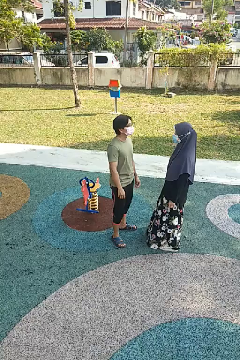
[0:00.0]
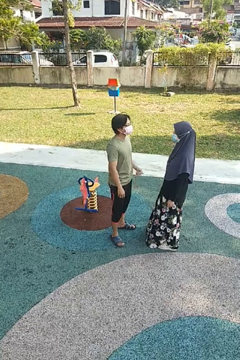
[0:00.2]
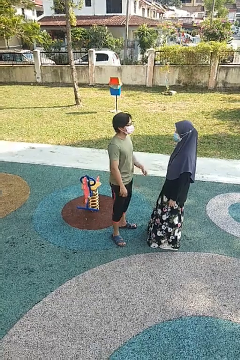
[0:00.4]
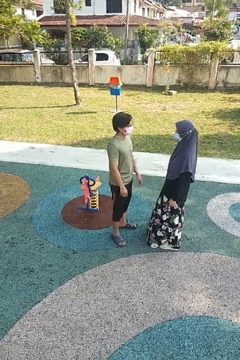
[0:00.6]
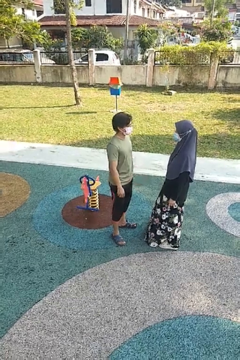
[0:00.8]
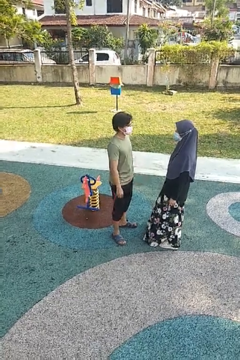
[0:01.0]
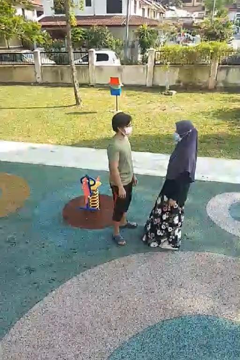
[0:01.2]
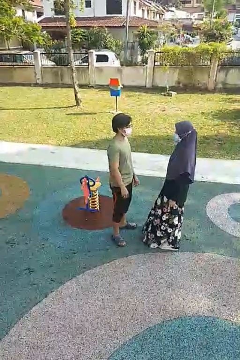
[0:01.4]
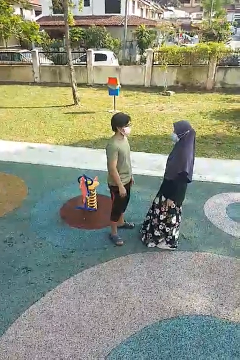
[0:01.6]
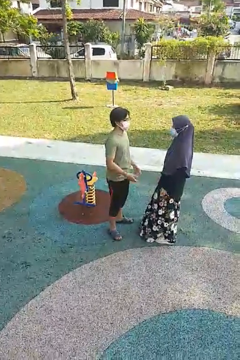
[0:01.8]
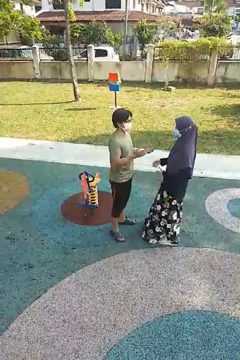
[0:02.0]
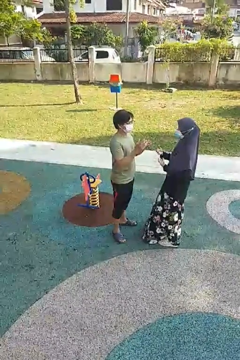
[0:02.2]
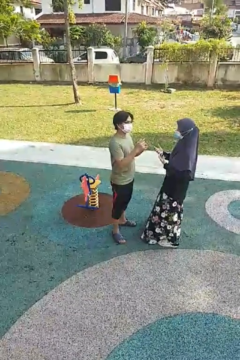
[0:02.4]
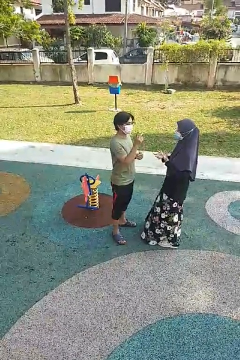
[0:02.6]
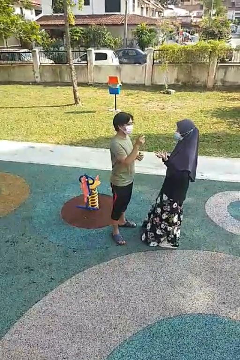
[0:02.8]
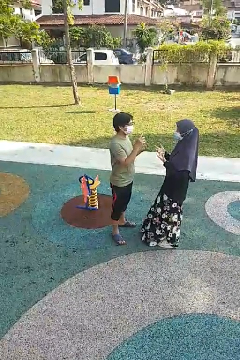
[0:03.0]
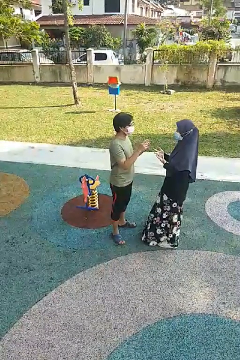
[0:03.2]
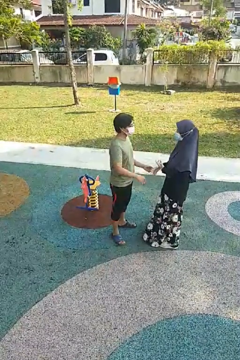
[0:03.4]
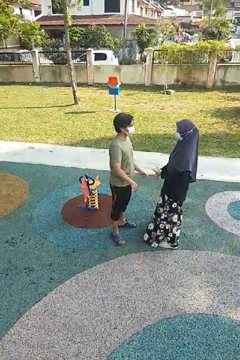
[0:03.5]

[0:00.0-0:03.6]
person talks to person

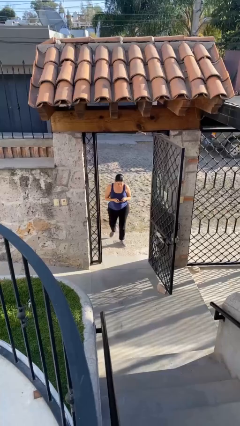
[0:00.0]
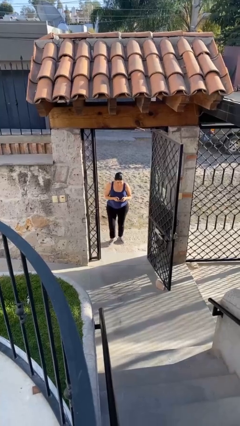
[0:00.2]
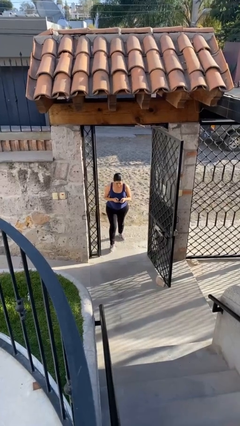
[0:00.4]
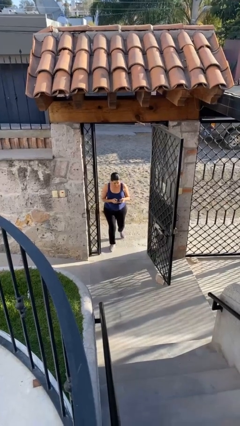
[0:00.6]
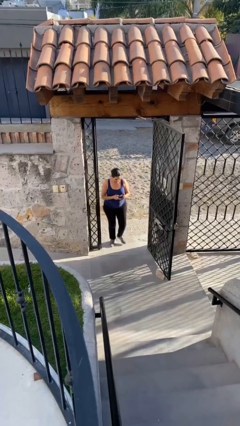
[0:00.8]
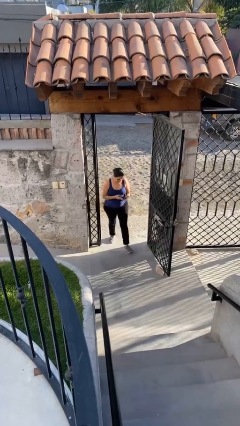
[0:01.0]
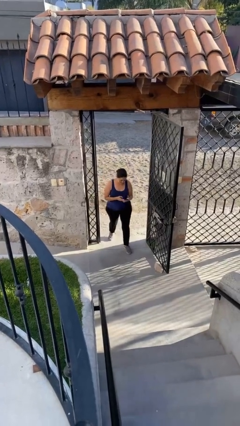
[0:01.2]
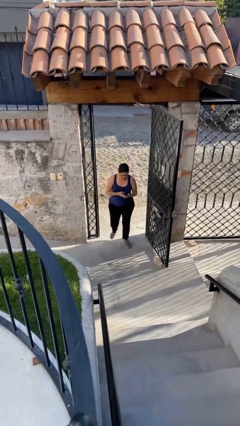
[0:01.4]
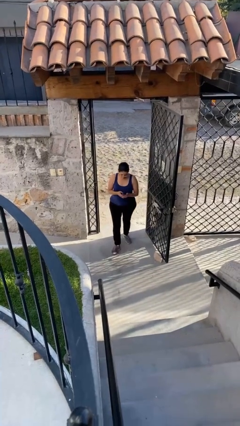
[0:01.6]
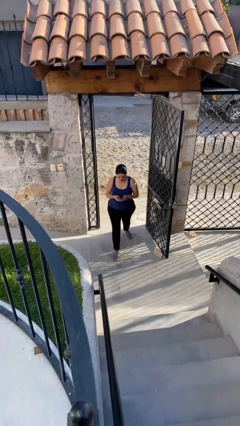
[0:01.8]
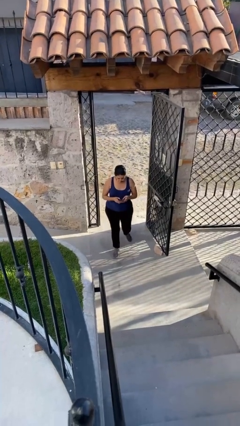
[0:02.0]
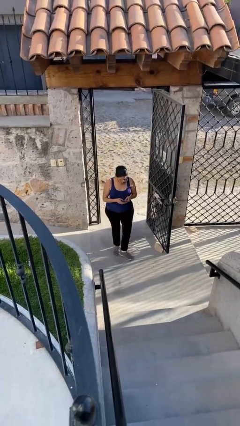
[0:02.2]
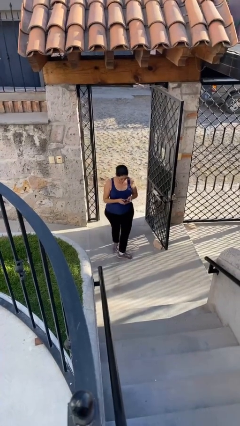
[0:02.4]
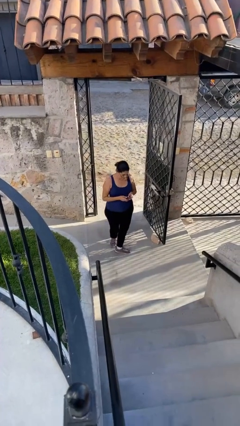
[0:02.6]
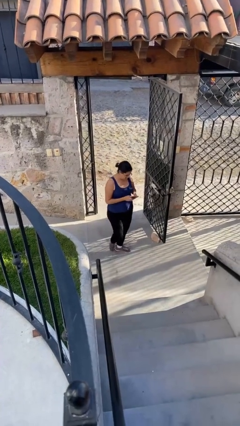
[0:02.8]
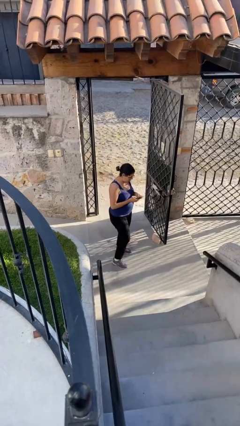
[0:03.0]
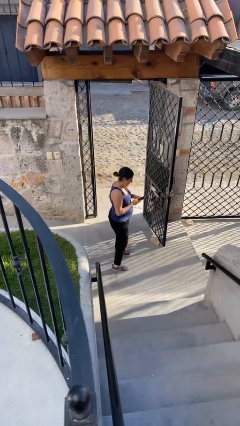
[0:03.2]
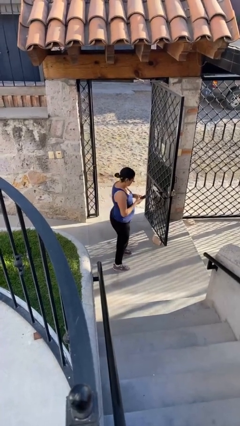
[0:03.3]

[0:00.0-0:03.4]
person enters scene through structure

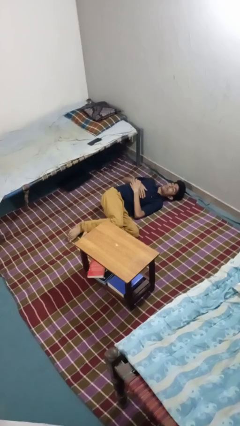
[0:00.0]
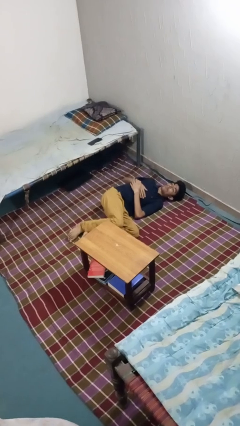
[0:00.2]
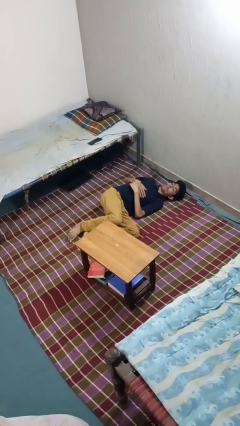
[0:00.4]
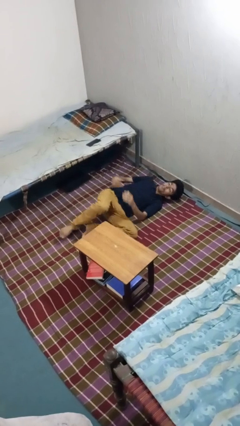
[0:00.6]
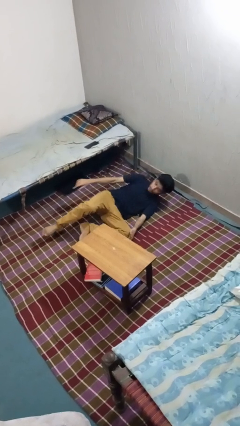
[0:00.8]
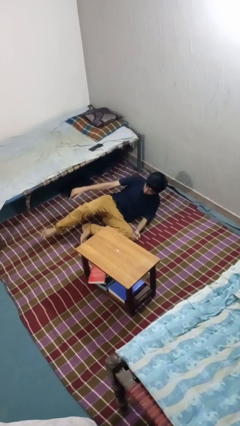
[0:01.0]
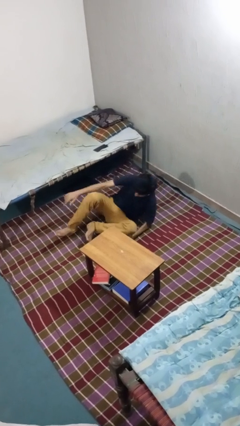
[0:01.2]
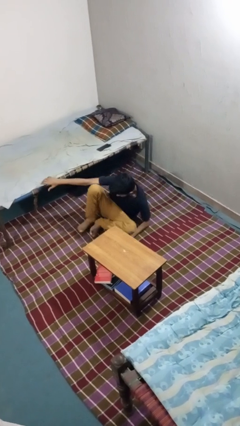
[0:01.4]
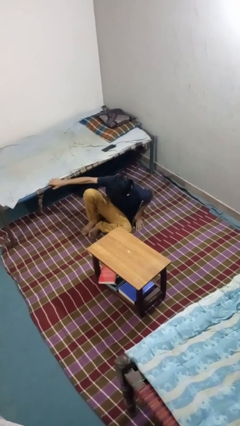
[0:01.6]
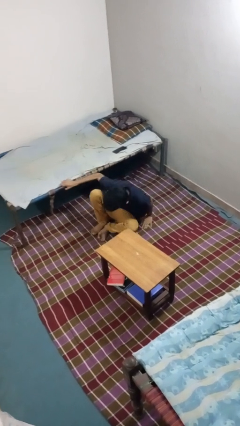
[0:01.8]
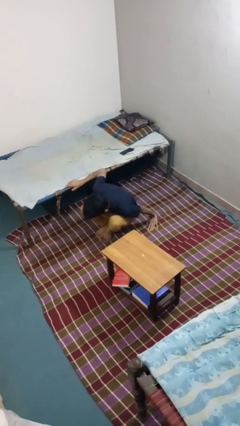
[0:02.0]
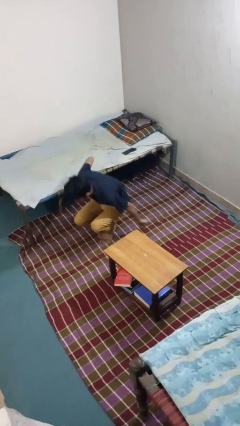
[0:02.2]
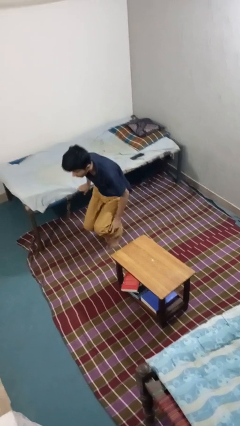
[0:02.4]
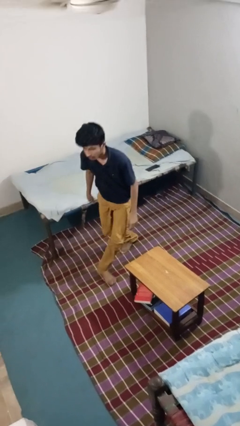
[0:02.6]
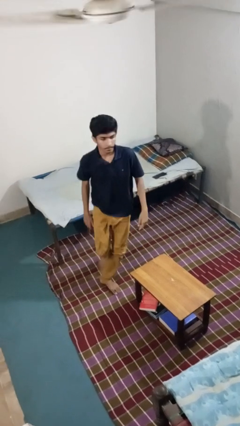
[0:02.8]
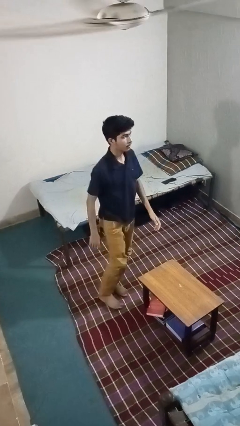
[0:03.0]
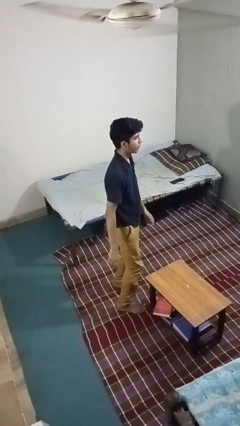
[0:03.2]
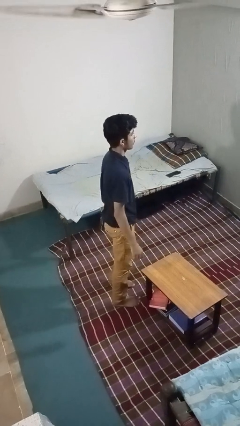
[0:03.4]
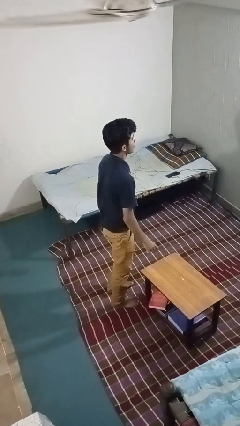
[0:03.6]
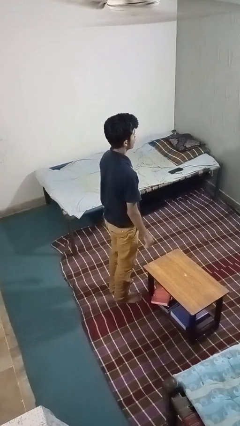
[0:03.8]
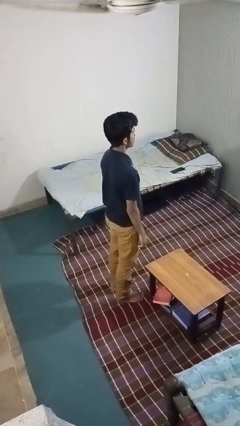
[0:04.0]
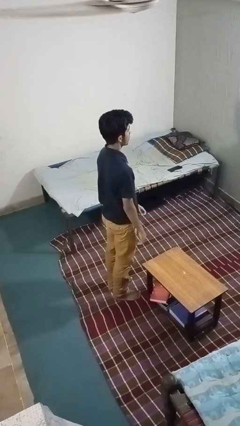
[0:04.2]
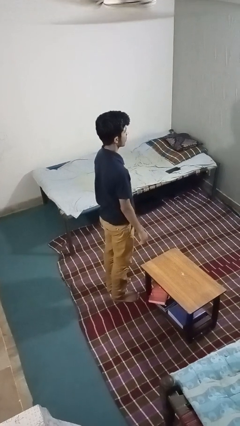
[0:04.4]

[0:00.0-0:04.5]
person stands up from floor

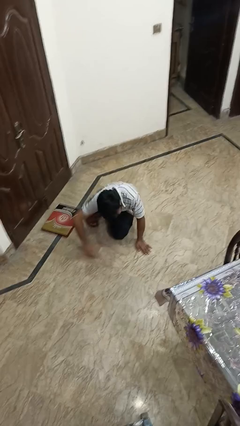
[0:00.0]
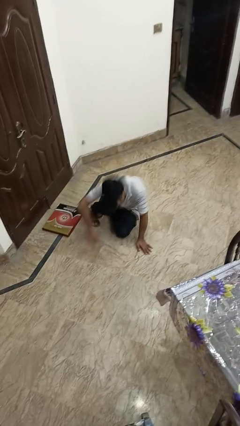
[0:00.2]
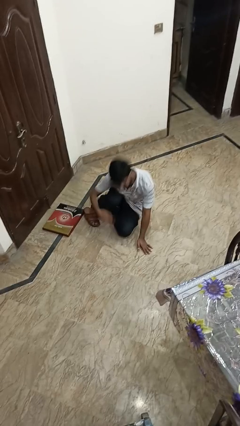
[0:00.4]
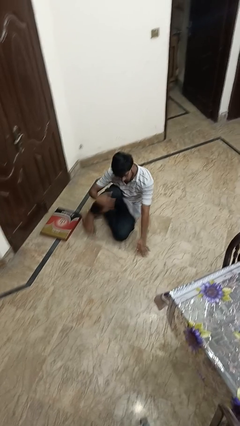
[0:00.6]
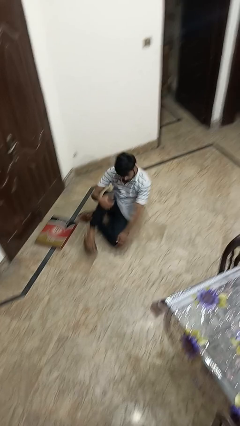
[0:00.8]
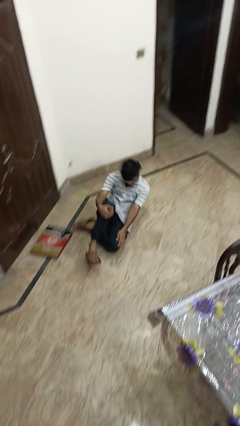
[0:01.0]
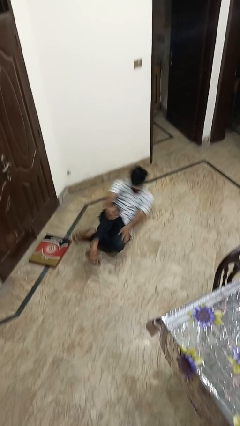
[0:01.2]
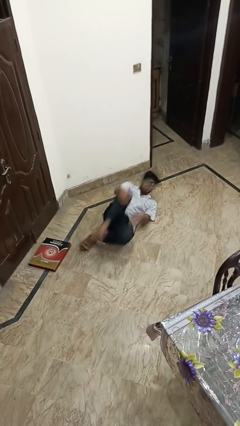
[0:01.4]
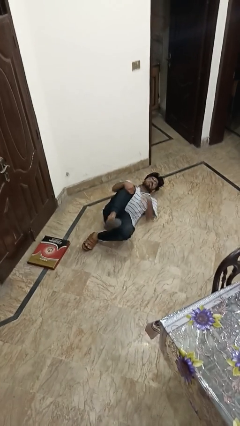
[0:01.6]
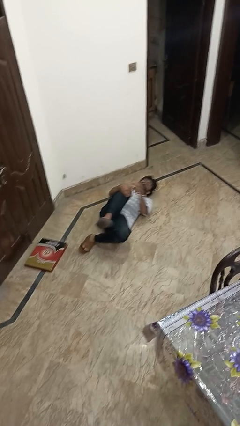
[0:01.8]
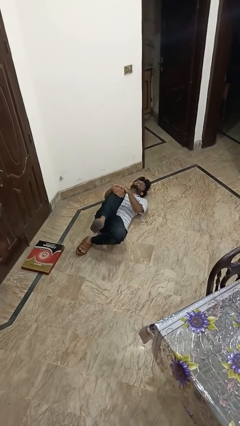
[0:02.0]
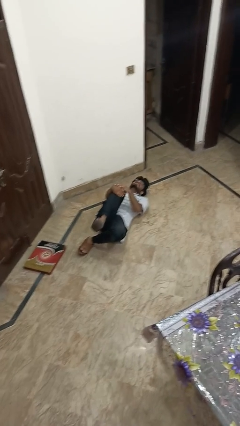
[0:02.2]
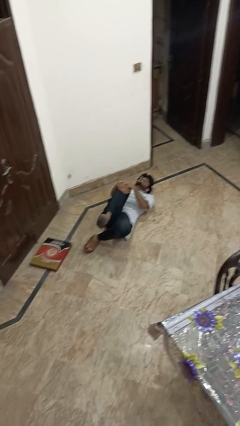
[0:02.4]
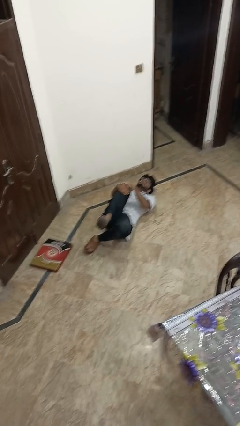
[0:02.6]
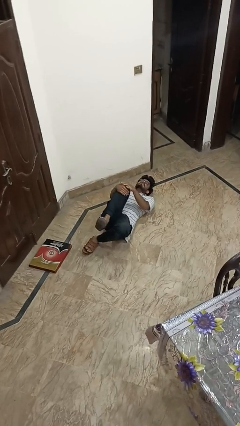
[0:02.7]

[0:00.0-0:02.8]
person lies down on floor

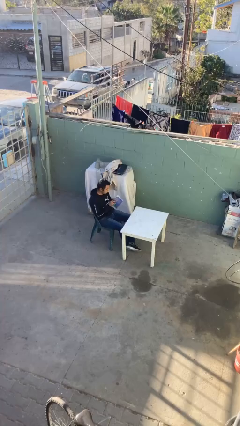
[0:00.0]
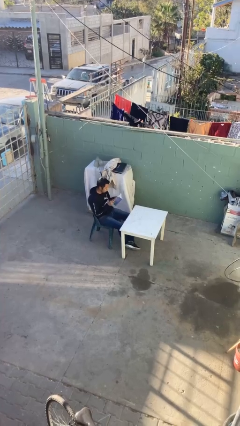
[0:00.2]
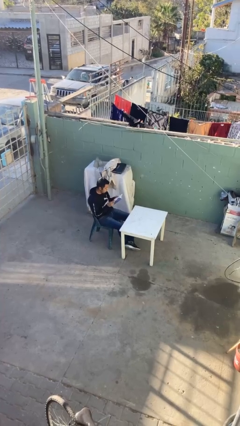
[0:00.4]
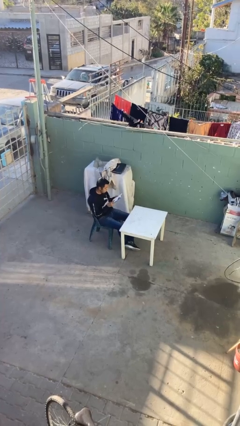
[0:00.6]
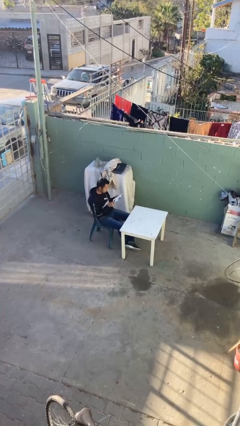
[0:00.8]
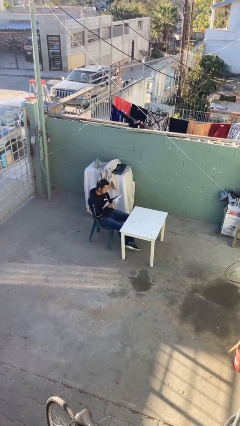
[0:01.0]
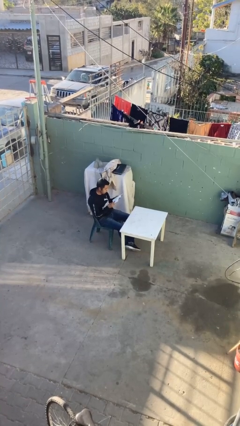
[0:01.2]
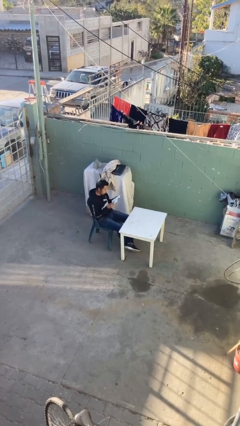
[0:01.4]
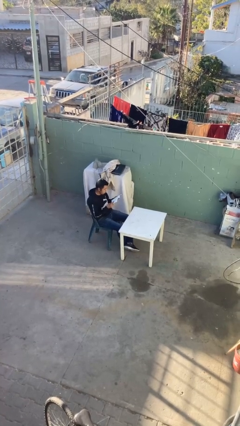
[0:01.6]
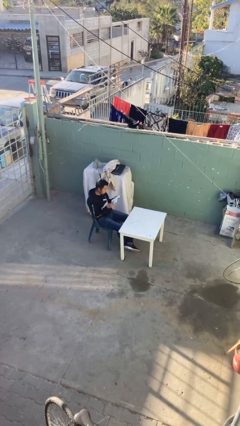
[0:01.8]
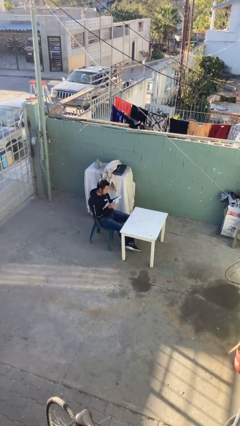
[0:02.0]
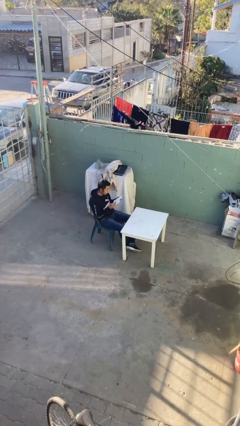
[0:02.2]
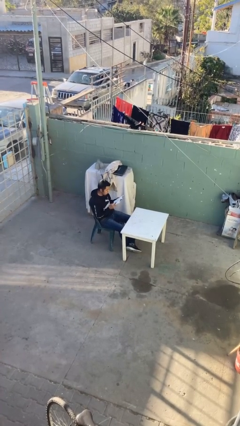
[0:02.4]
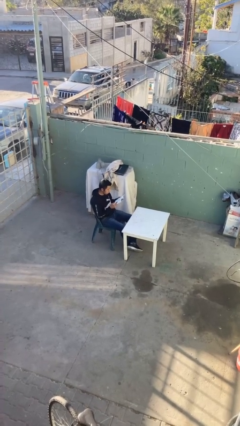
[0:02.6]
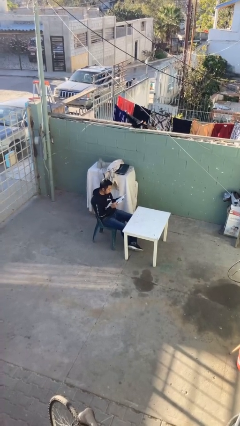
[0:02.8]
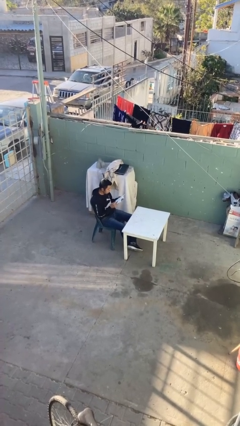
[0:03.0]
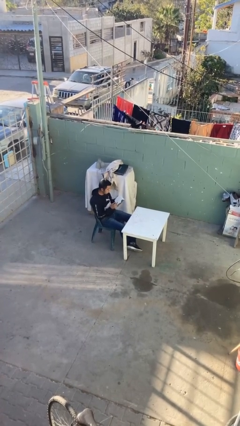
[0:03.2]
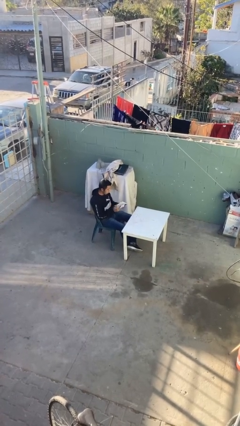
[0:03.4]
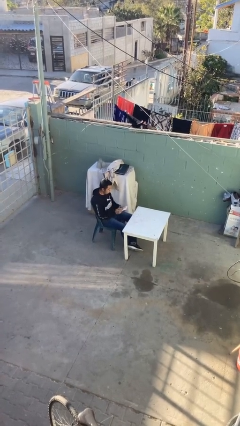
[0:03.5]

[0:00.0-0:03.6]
person reads document

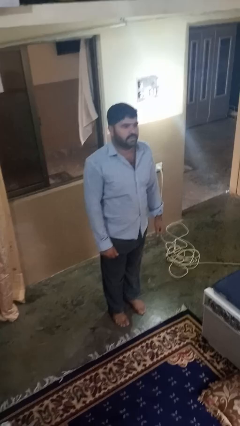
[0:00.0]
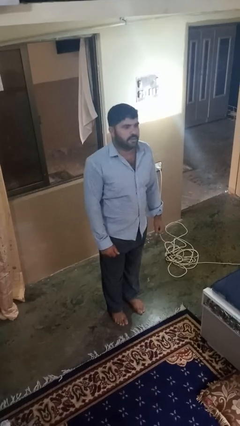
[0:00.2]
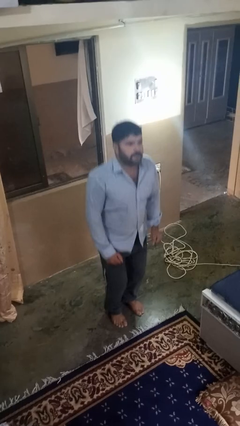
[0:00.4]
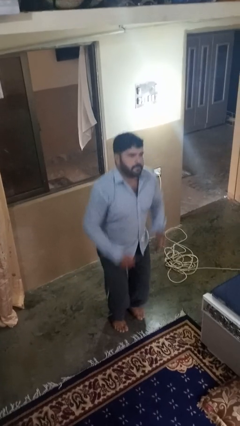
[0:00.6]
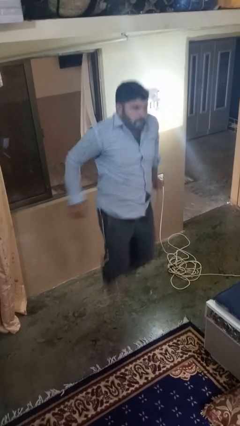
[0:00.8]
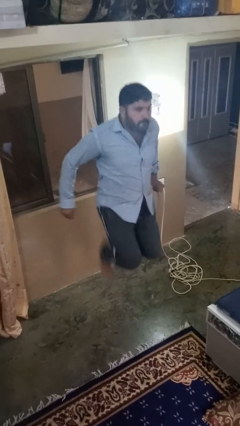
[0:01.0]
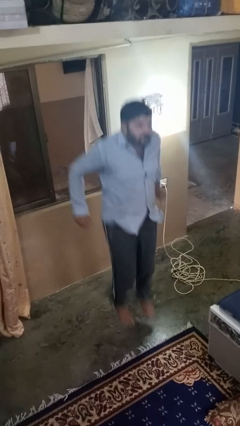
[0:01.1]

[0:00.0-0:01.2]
person jumps
